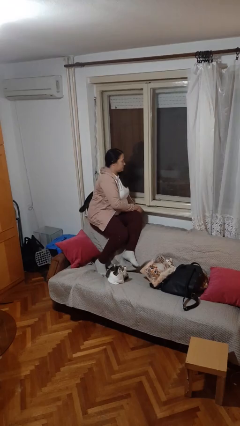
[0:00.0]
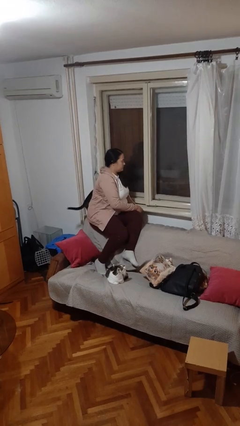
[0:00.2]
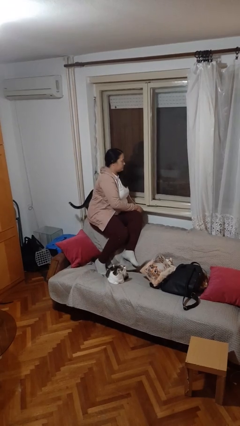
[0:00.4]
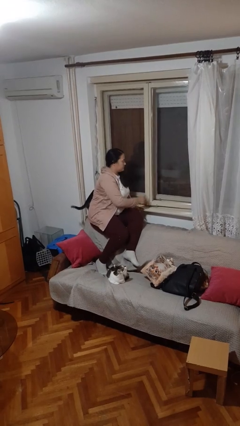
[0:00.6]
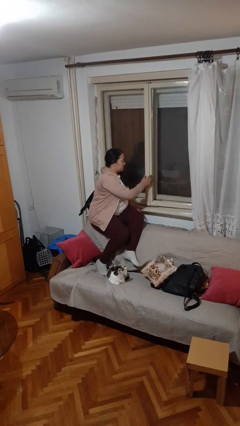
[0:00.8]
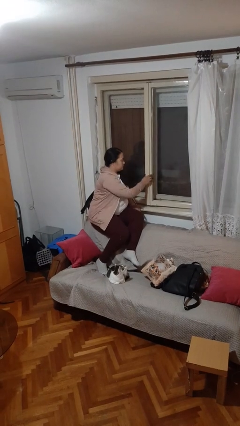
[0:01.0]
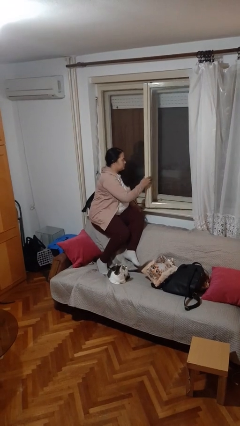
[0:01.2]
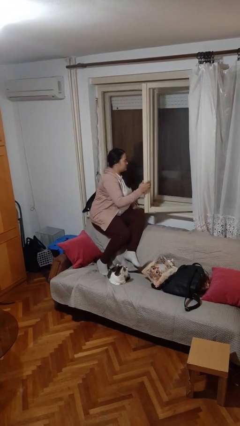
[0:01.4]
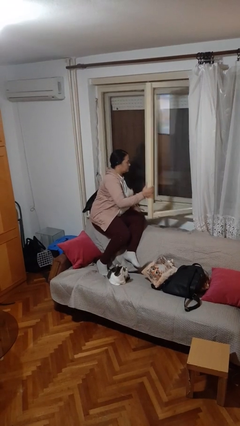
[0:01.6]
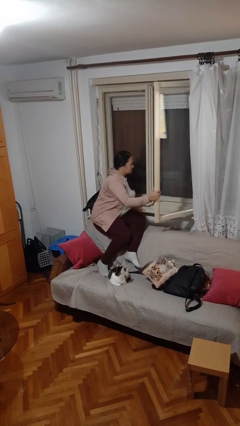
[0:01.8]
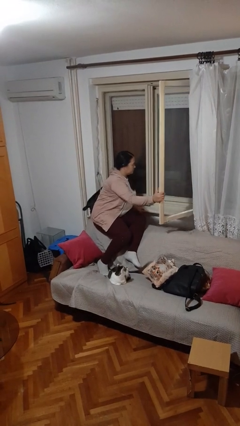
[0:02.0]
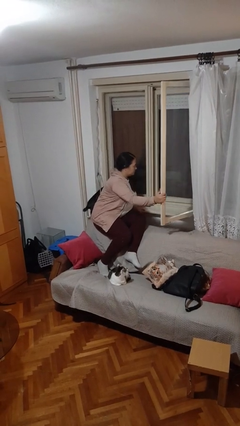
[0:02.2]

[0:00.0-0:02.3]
person opens home window

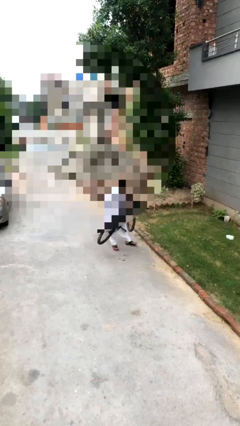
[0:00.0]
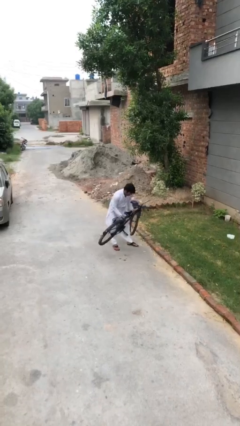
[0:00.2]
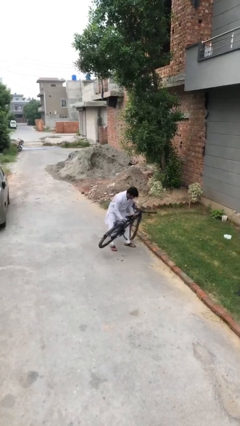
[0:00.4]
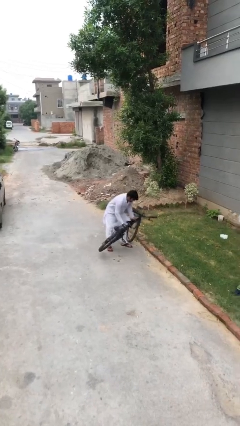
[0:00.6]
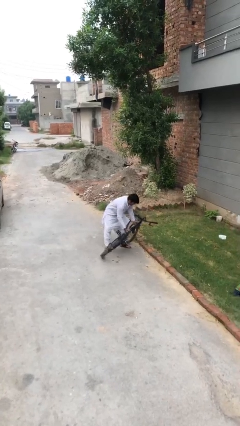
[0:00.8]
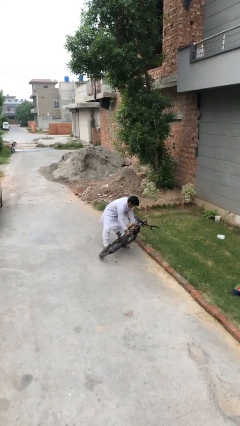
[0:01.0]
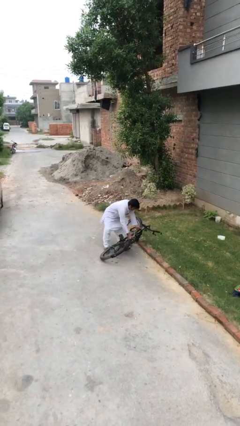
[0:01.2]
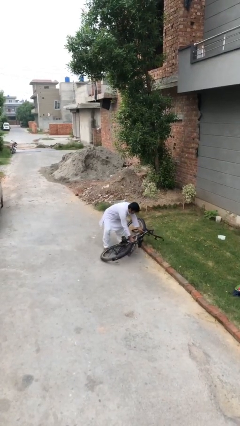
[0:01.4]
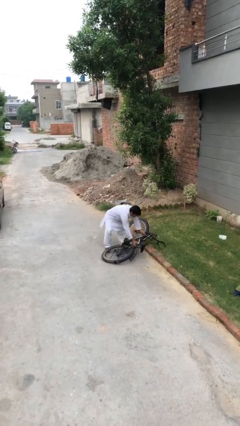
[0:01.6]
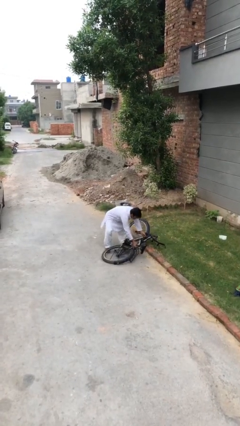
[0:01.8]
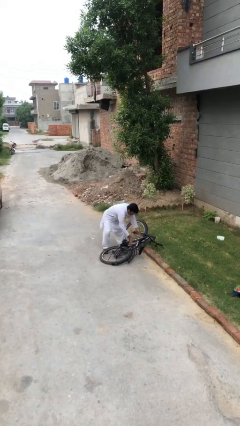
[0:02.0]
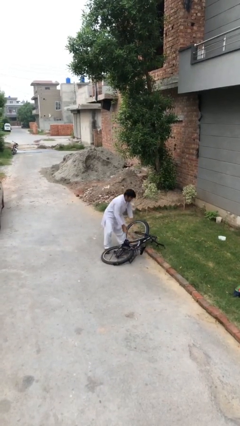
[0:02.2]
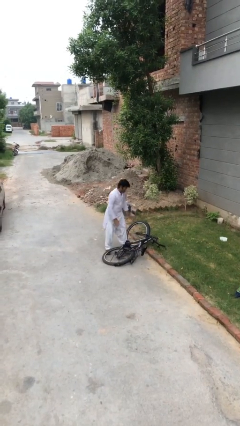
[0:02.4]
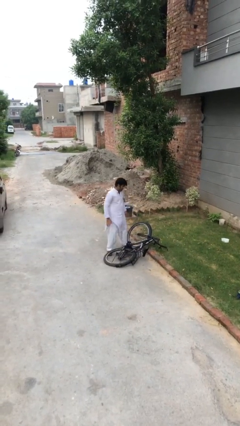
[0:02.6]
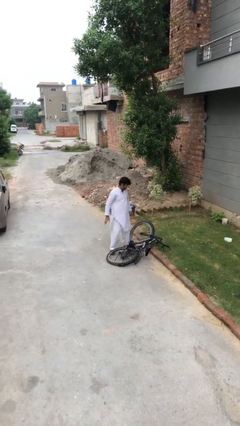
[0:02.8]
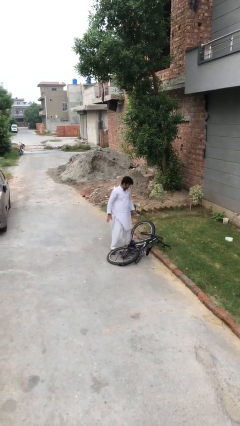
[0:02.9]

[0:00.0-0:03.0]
person puts down object on floor

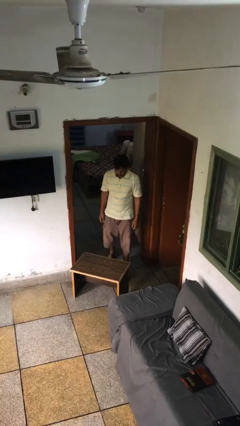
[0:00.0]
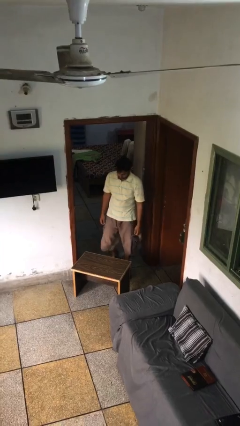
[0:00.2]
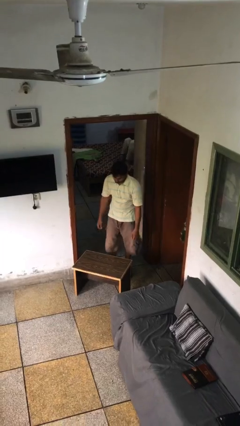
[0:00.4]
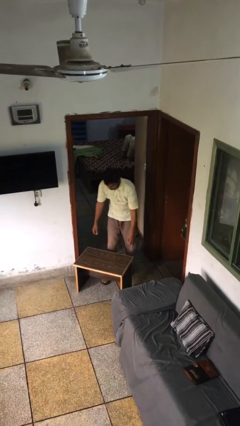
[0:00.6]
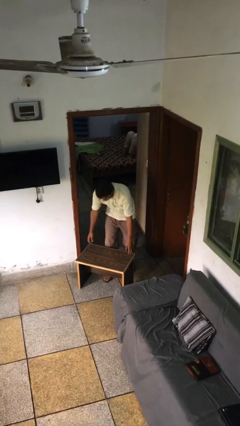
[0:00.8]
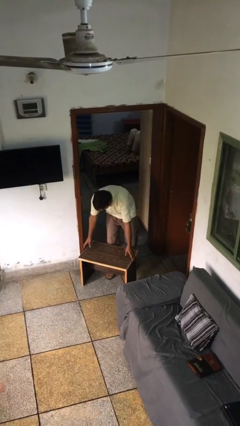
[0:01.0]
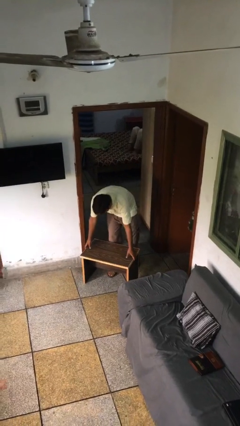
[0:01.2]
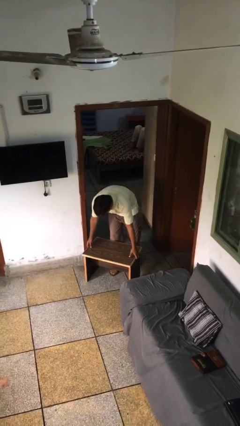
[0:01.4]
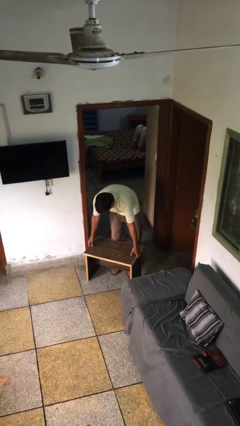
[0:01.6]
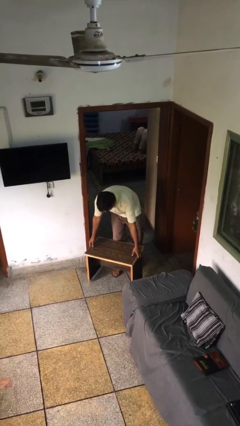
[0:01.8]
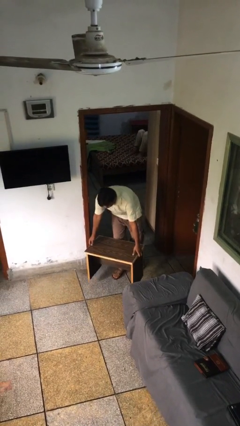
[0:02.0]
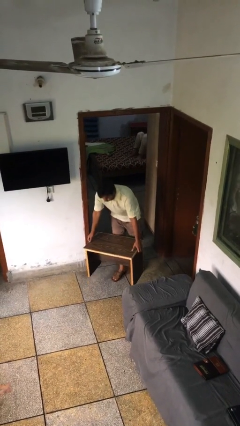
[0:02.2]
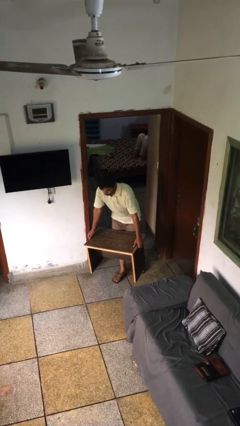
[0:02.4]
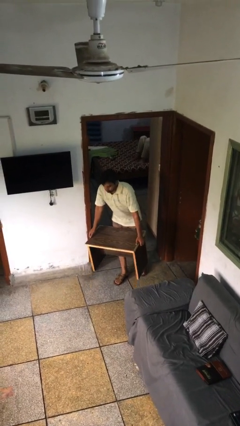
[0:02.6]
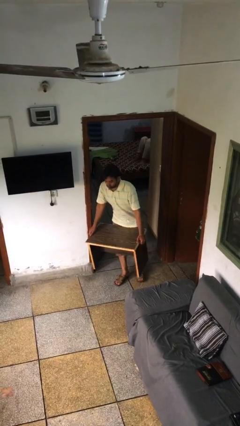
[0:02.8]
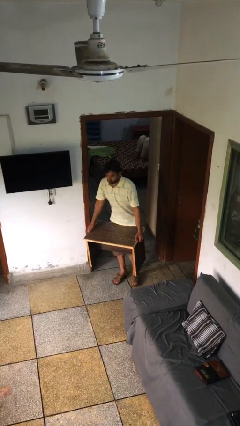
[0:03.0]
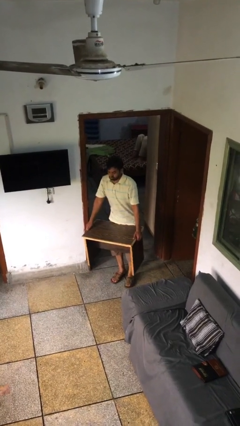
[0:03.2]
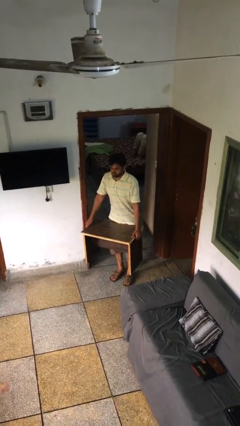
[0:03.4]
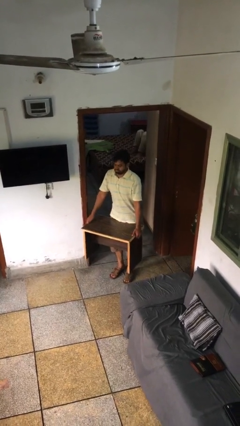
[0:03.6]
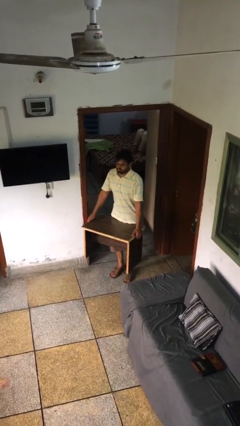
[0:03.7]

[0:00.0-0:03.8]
person picks up object from floor

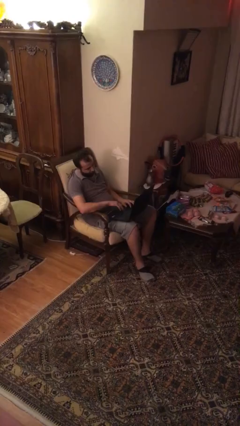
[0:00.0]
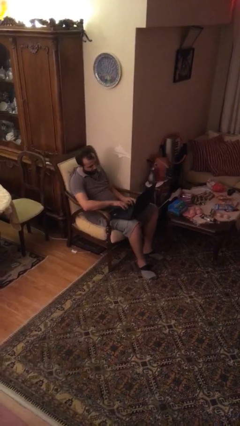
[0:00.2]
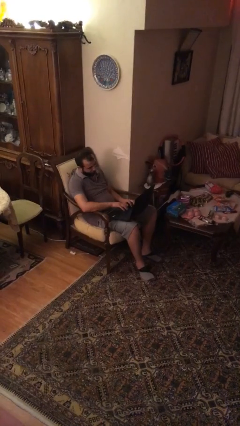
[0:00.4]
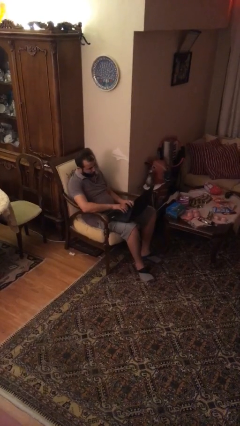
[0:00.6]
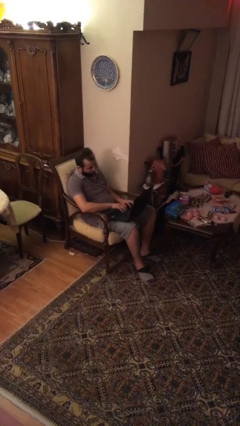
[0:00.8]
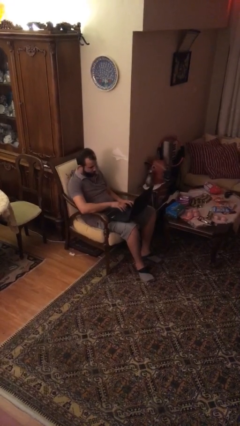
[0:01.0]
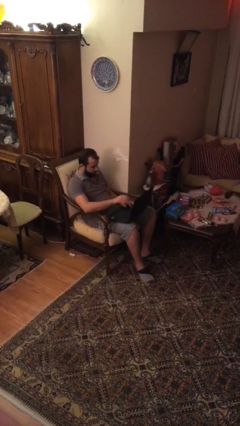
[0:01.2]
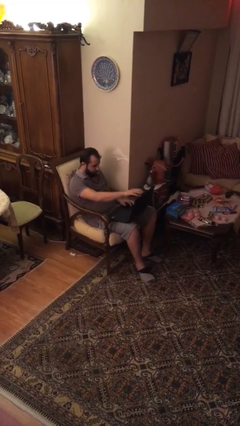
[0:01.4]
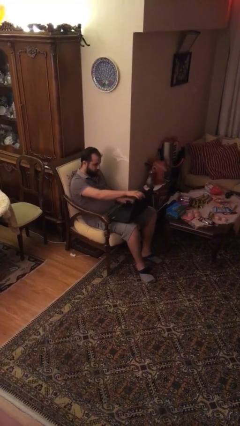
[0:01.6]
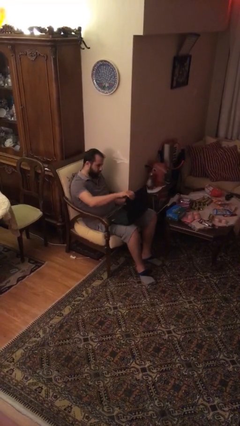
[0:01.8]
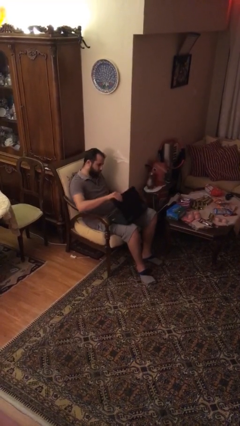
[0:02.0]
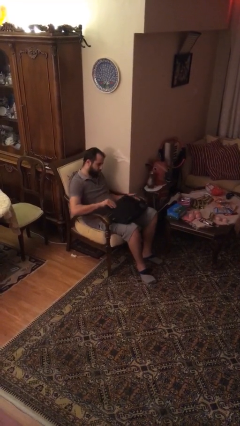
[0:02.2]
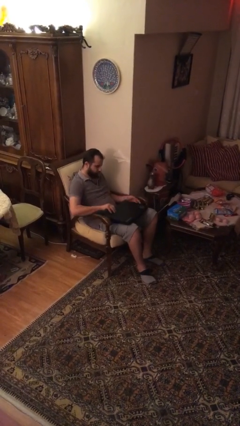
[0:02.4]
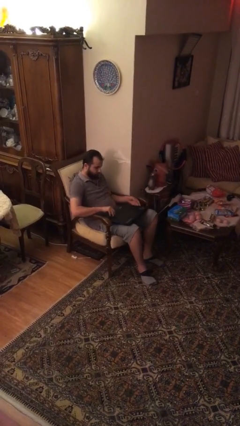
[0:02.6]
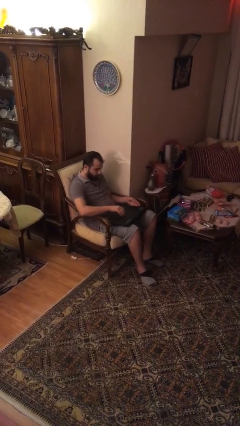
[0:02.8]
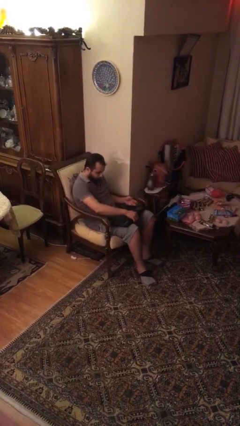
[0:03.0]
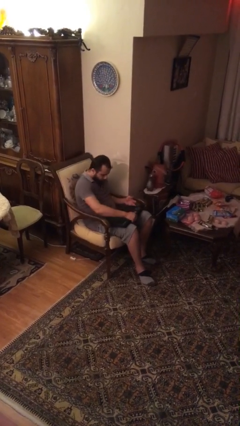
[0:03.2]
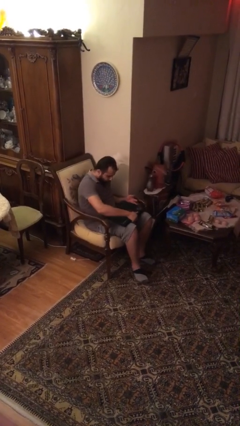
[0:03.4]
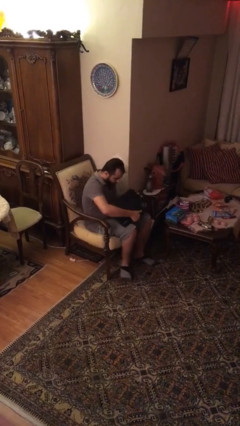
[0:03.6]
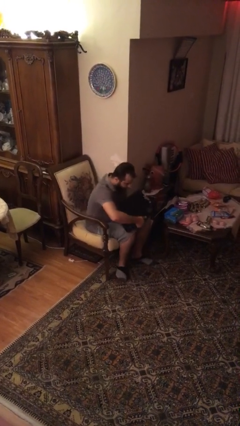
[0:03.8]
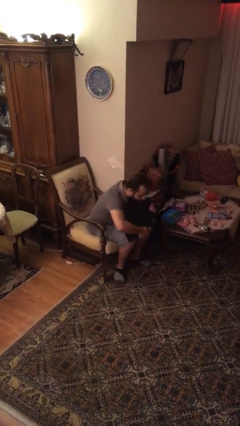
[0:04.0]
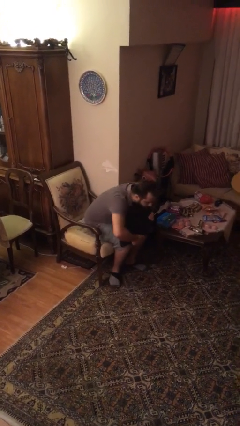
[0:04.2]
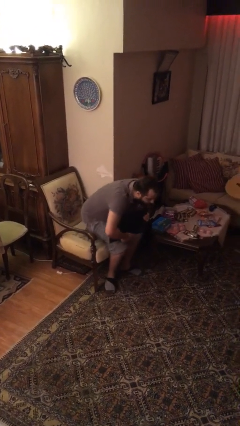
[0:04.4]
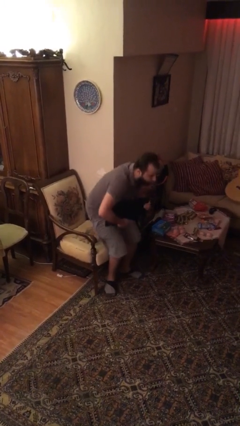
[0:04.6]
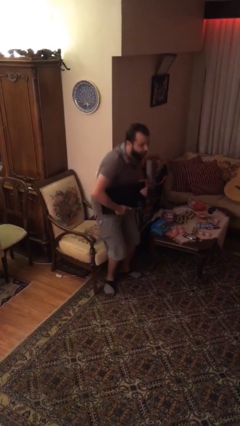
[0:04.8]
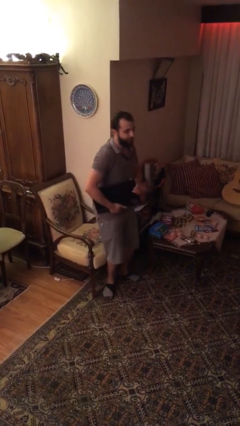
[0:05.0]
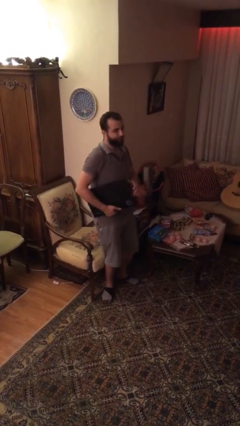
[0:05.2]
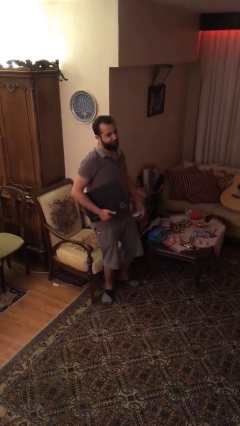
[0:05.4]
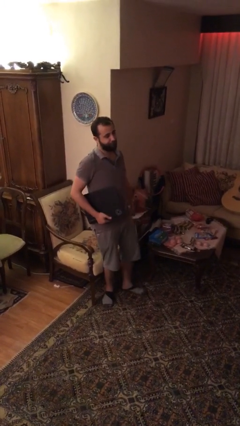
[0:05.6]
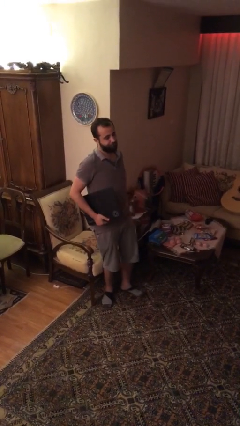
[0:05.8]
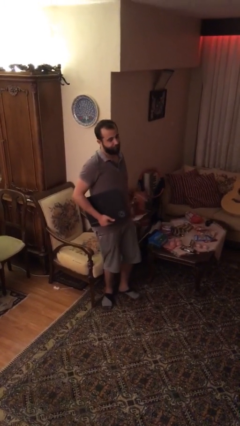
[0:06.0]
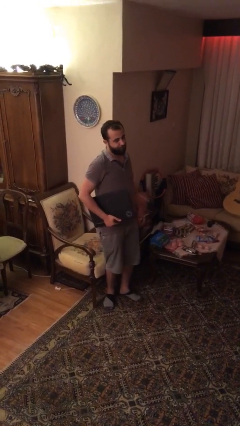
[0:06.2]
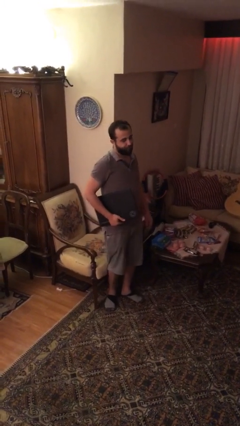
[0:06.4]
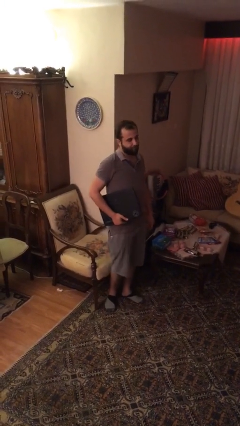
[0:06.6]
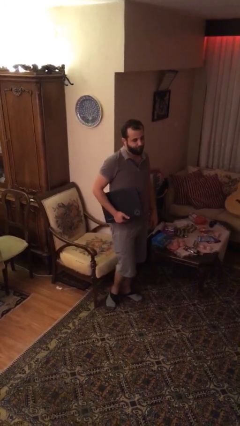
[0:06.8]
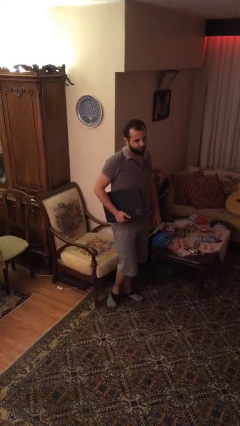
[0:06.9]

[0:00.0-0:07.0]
person stands up

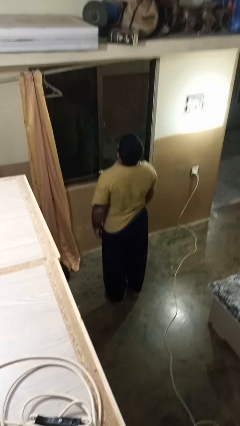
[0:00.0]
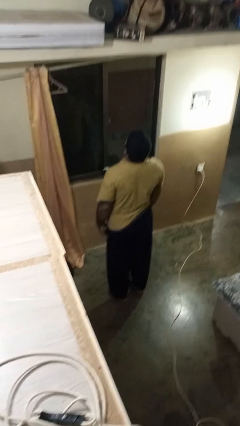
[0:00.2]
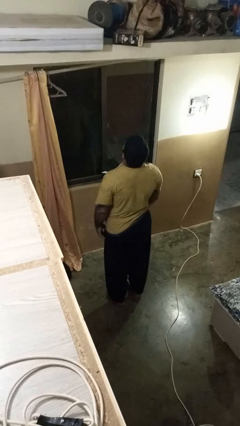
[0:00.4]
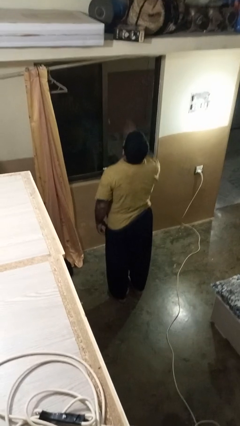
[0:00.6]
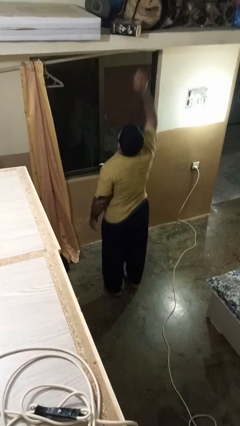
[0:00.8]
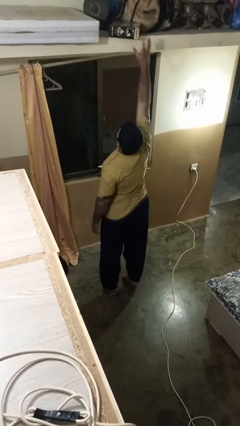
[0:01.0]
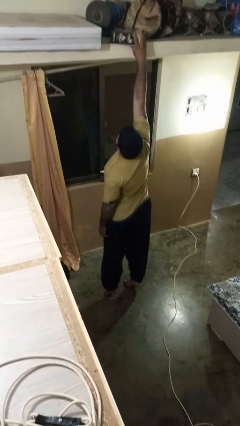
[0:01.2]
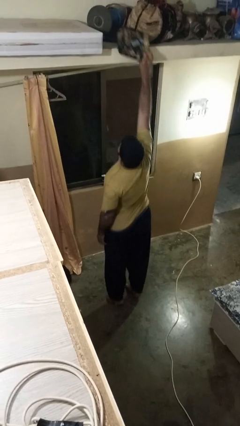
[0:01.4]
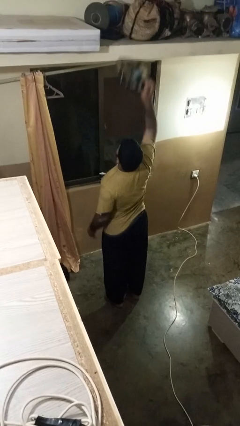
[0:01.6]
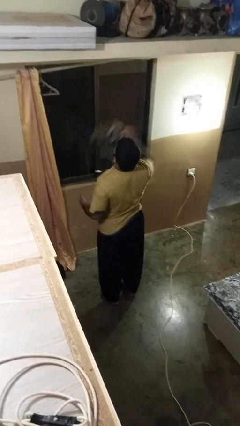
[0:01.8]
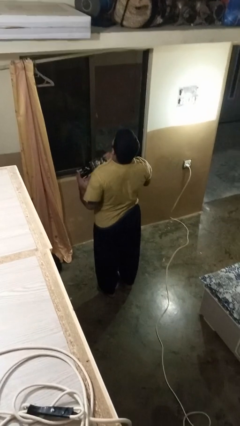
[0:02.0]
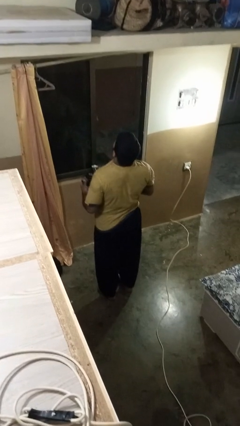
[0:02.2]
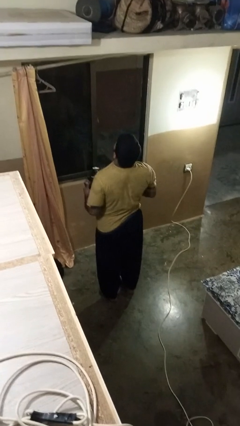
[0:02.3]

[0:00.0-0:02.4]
person picks up object from shelf
